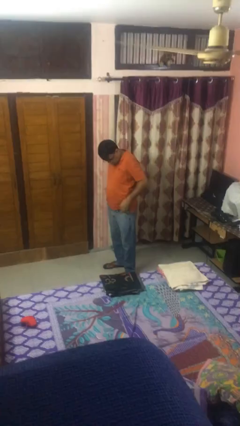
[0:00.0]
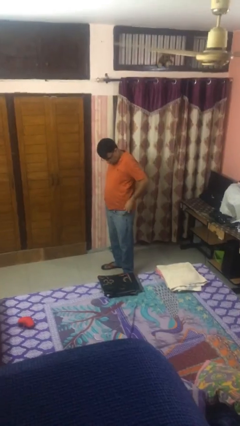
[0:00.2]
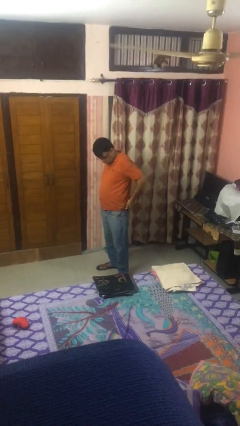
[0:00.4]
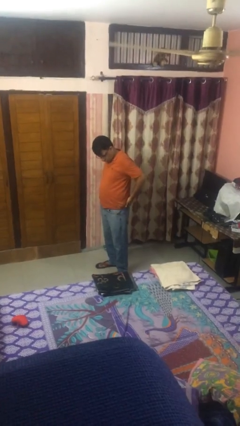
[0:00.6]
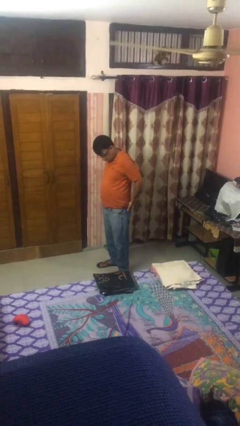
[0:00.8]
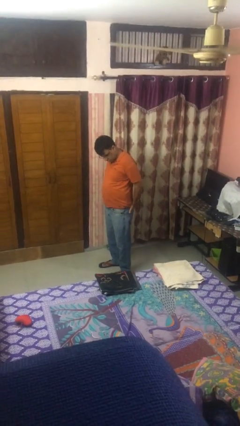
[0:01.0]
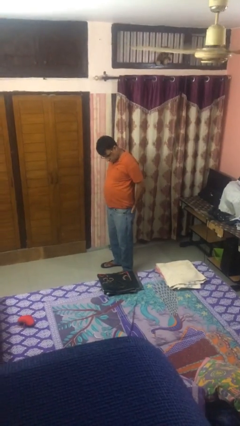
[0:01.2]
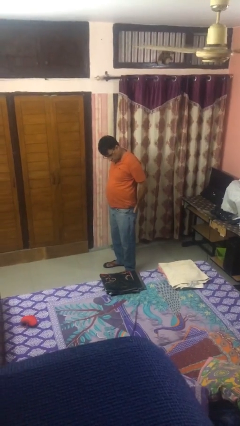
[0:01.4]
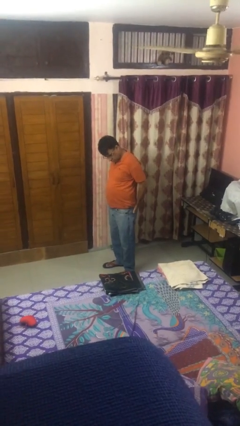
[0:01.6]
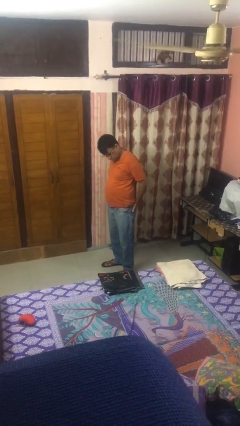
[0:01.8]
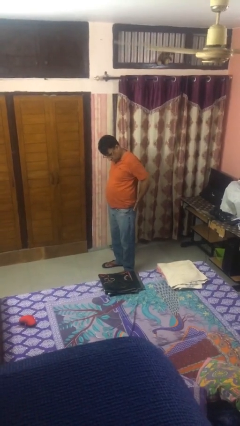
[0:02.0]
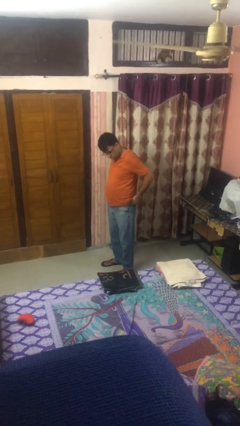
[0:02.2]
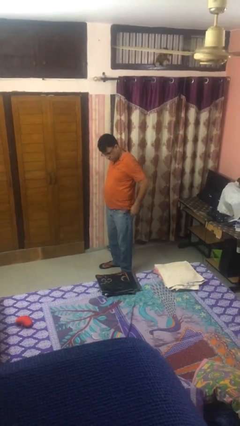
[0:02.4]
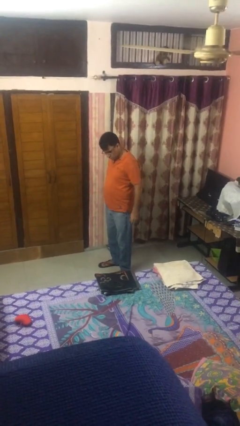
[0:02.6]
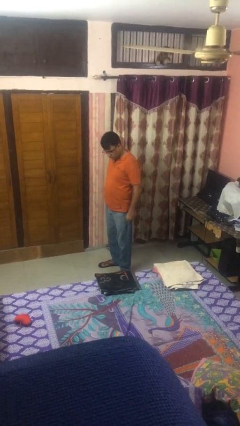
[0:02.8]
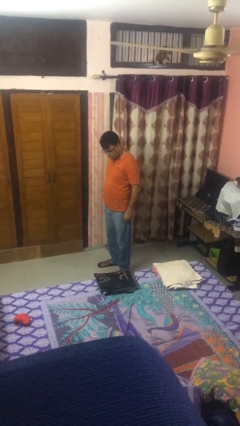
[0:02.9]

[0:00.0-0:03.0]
person puts hands in back pockets

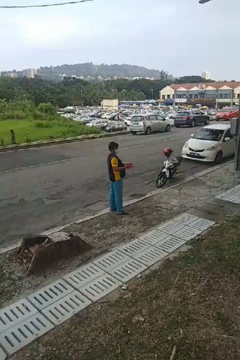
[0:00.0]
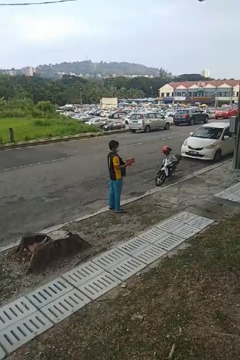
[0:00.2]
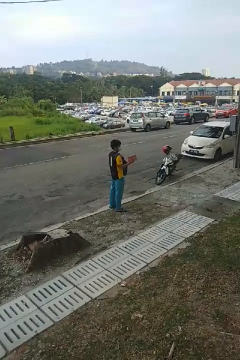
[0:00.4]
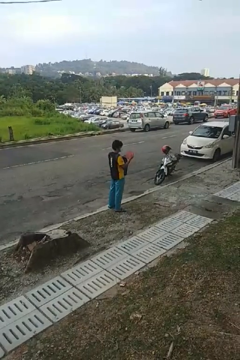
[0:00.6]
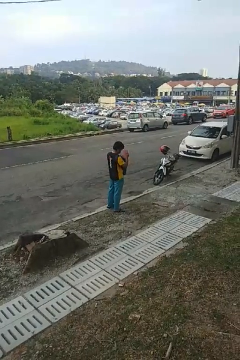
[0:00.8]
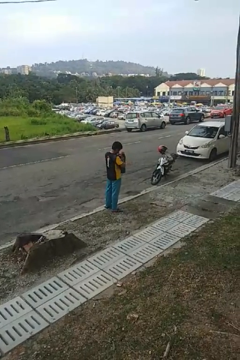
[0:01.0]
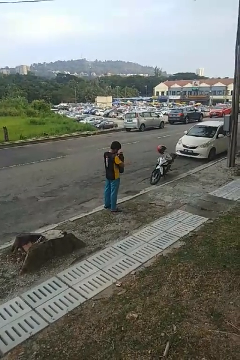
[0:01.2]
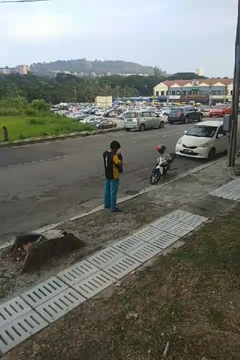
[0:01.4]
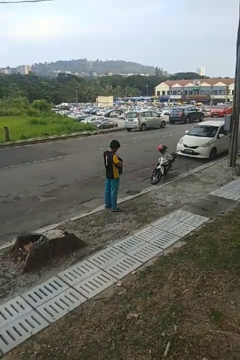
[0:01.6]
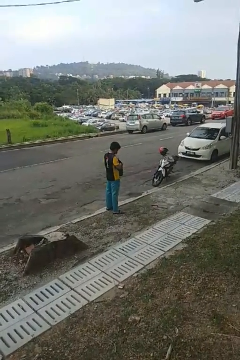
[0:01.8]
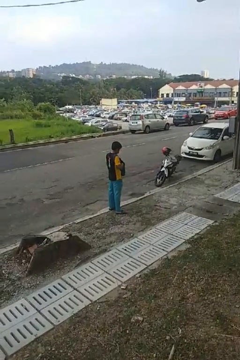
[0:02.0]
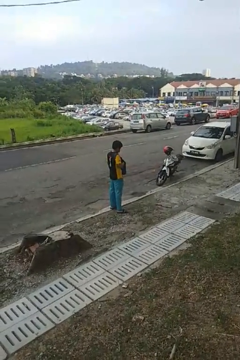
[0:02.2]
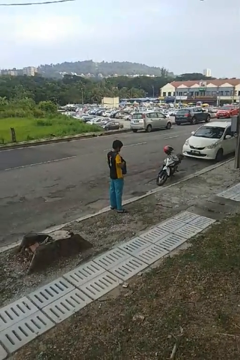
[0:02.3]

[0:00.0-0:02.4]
person puts object into backpack

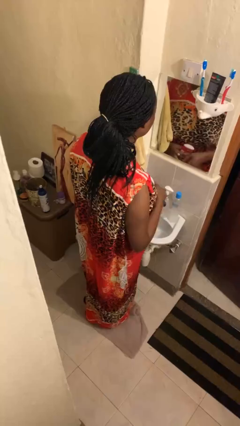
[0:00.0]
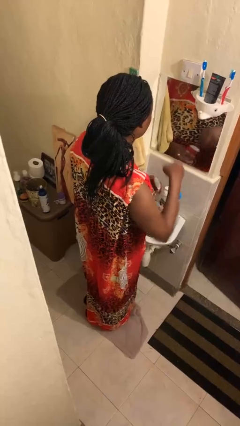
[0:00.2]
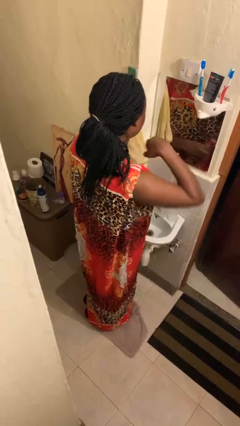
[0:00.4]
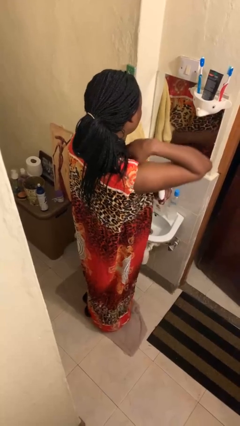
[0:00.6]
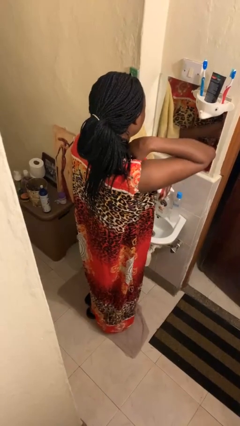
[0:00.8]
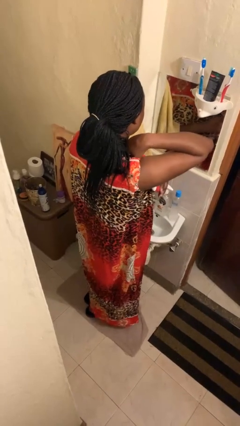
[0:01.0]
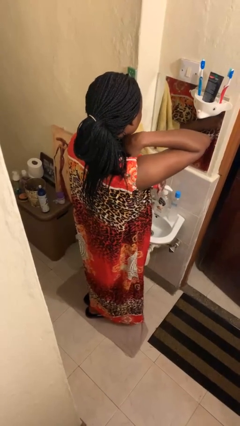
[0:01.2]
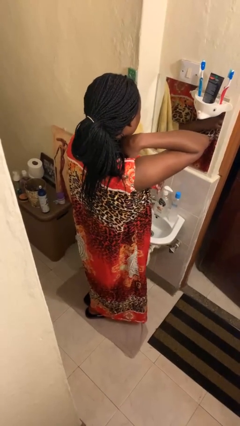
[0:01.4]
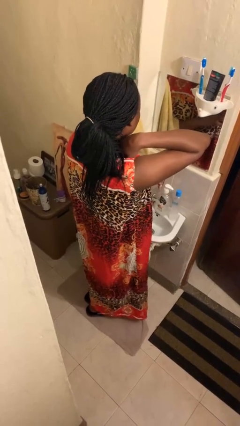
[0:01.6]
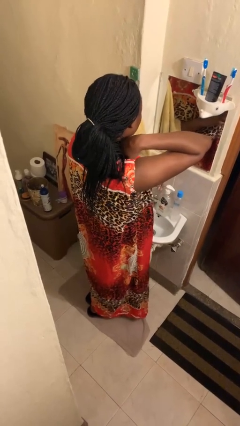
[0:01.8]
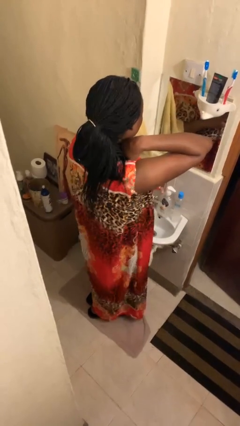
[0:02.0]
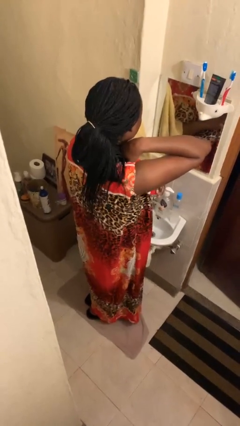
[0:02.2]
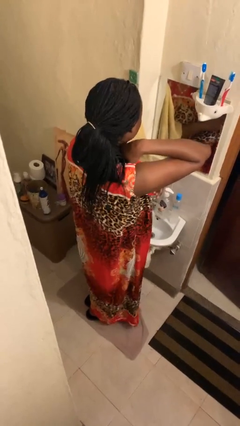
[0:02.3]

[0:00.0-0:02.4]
person applies deodorant

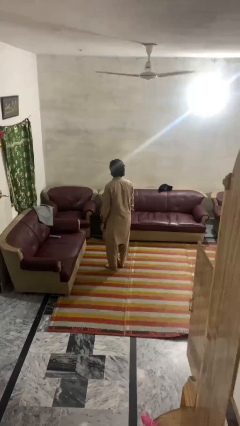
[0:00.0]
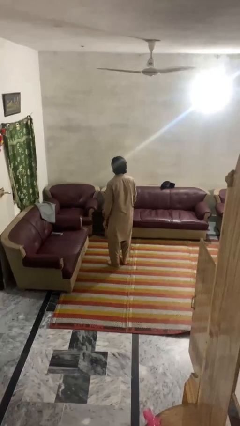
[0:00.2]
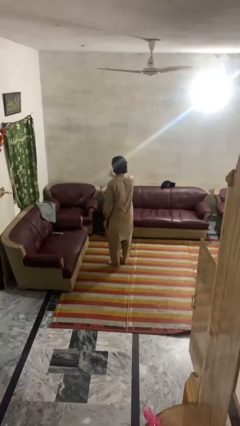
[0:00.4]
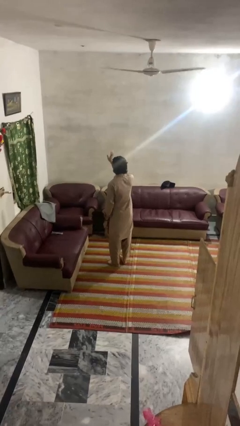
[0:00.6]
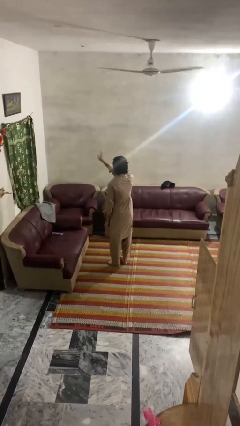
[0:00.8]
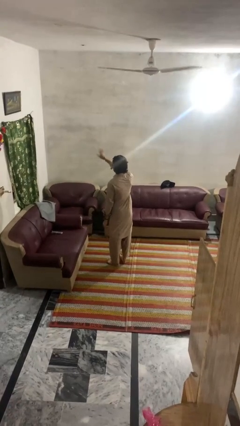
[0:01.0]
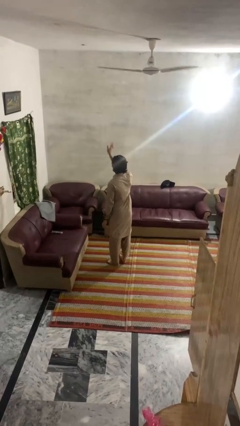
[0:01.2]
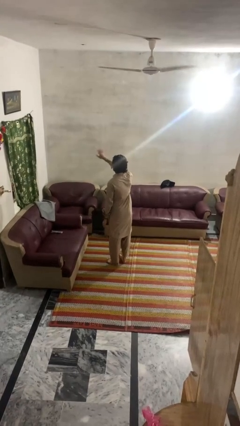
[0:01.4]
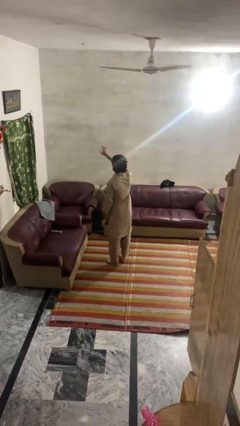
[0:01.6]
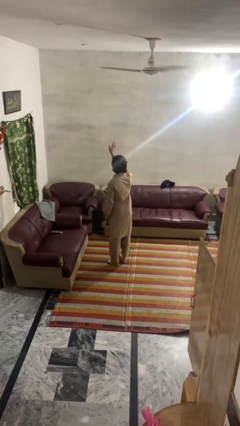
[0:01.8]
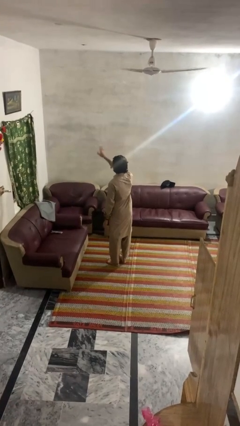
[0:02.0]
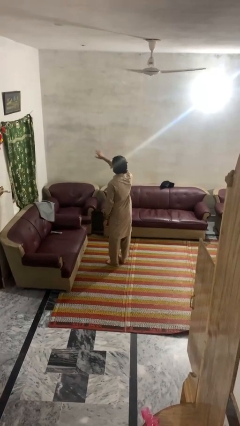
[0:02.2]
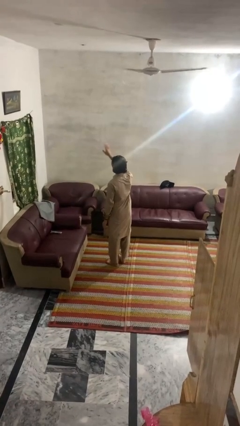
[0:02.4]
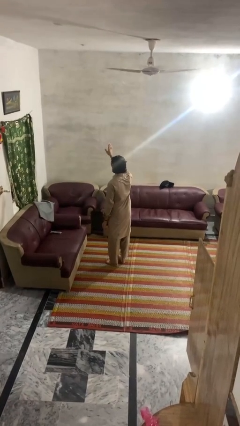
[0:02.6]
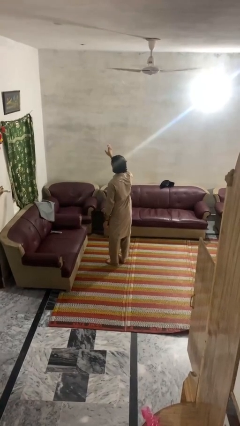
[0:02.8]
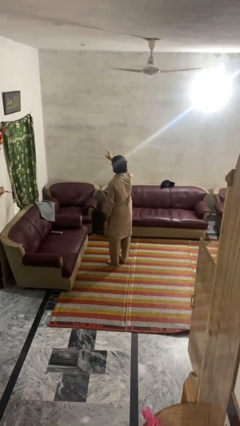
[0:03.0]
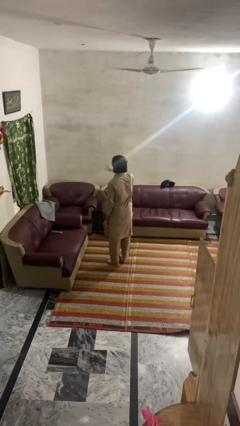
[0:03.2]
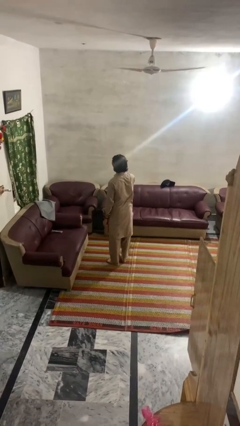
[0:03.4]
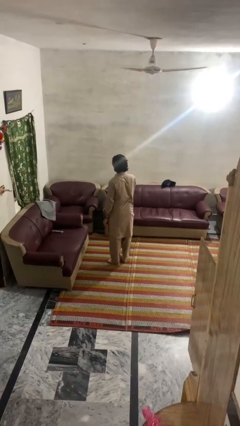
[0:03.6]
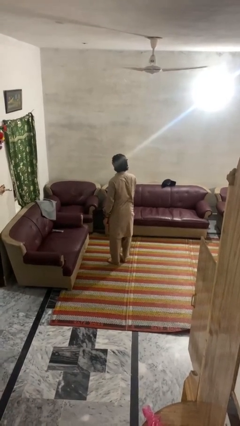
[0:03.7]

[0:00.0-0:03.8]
person waves at person

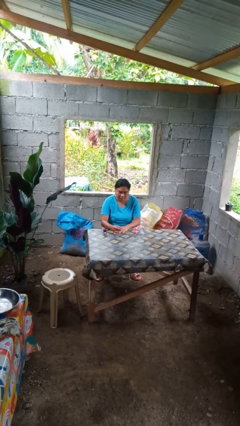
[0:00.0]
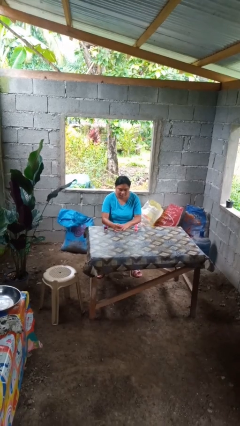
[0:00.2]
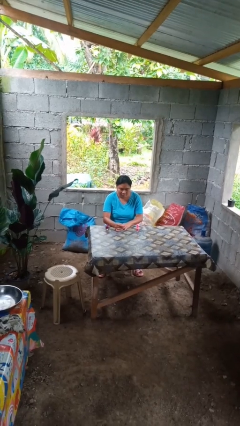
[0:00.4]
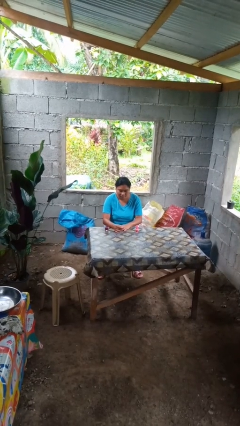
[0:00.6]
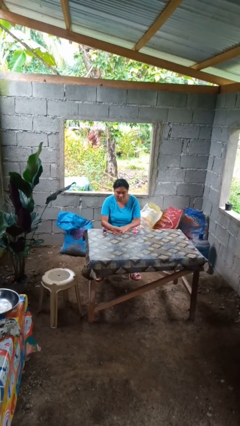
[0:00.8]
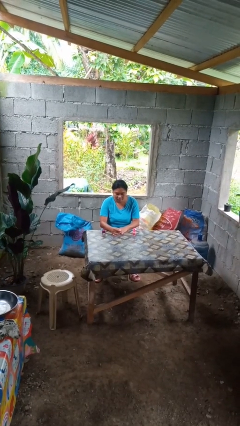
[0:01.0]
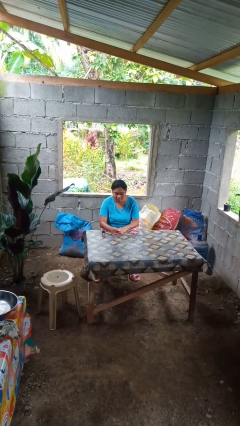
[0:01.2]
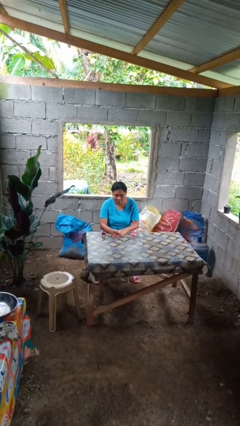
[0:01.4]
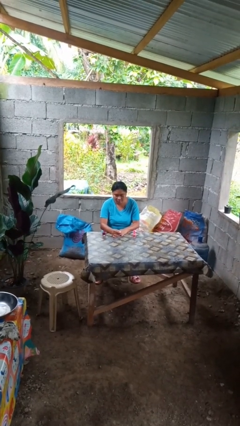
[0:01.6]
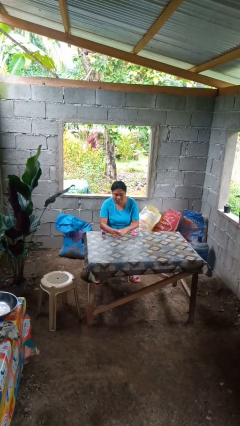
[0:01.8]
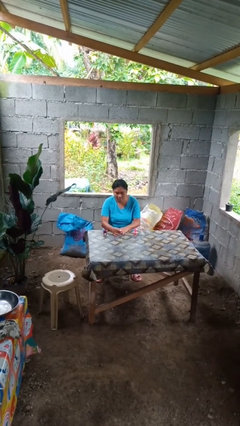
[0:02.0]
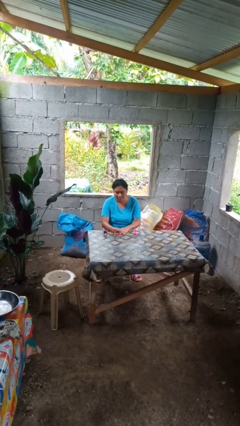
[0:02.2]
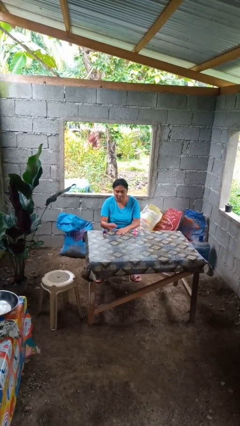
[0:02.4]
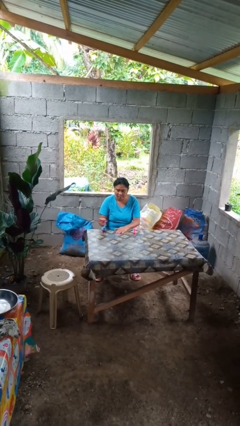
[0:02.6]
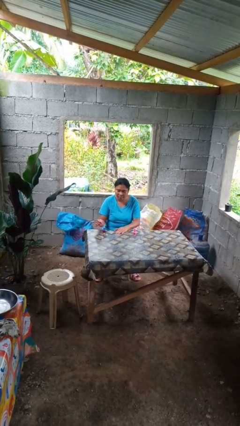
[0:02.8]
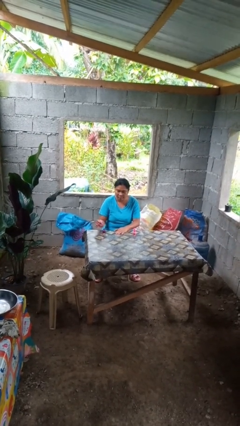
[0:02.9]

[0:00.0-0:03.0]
person paints fingernails

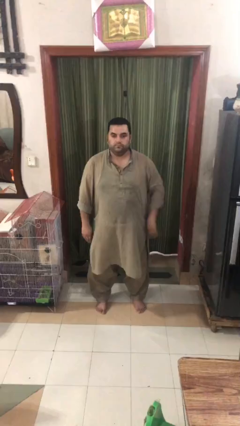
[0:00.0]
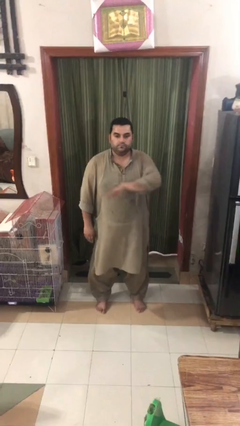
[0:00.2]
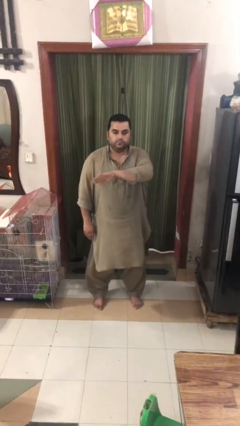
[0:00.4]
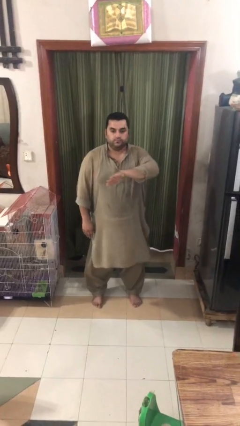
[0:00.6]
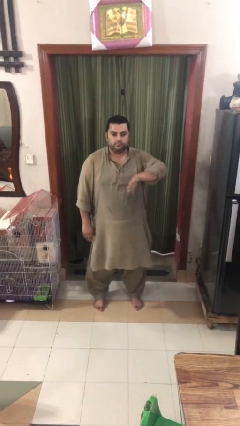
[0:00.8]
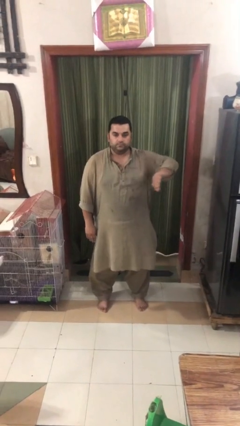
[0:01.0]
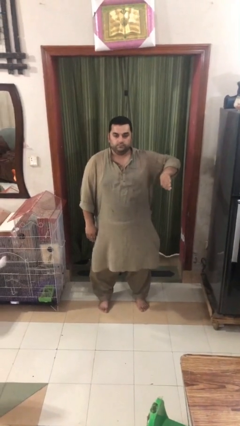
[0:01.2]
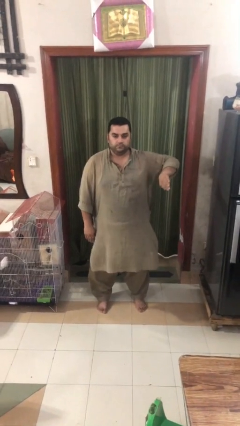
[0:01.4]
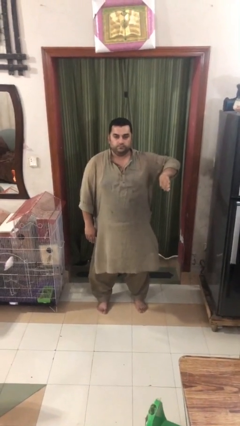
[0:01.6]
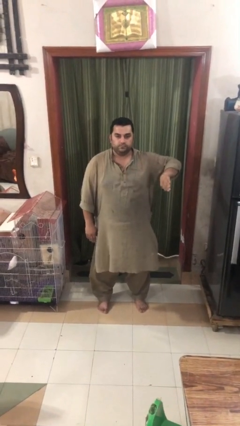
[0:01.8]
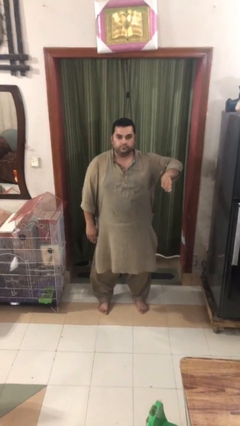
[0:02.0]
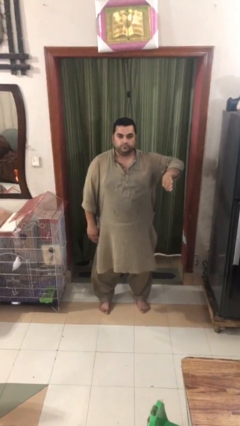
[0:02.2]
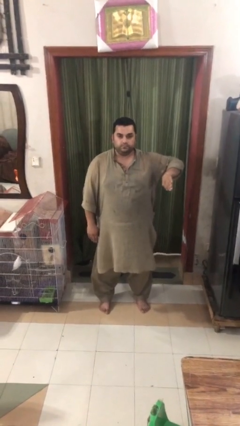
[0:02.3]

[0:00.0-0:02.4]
person gestures swipe left

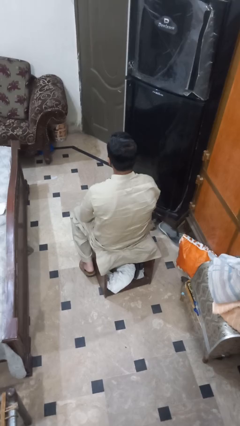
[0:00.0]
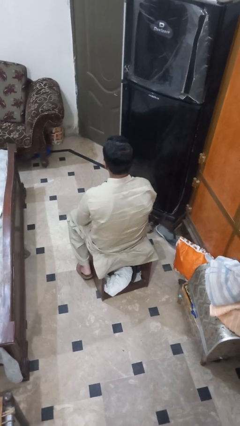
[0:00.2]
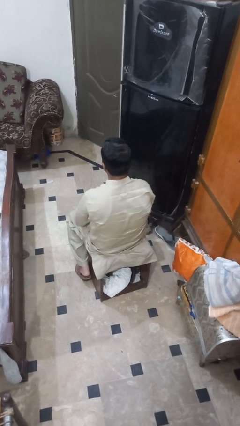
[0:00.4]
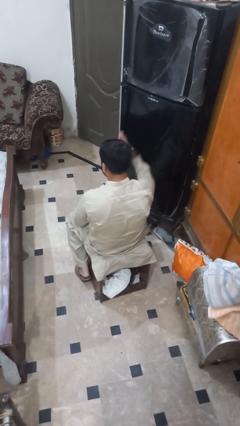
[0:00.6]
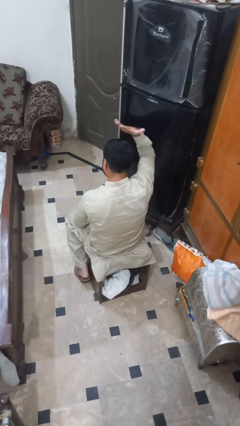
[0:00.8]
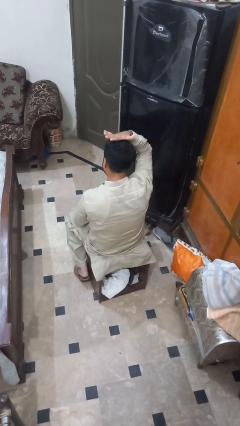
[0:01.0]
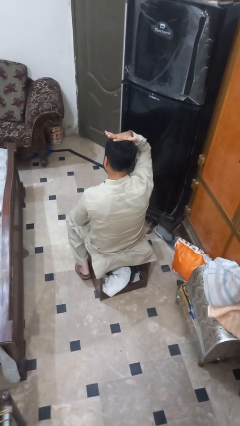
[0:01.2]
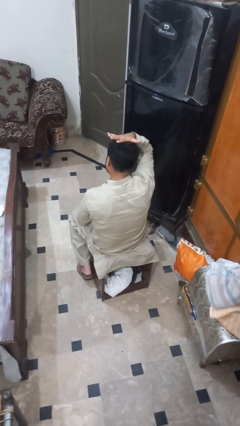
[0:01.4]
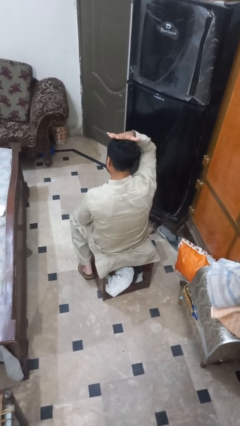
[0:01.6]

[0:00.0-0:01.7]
person pats head
